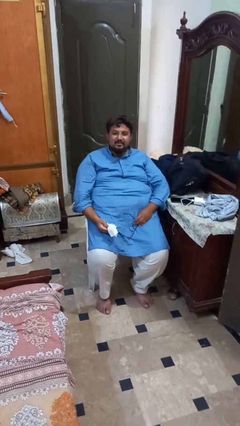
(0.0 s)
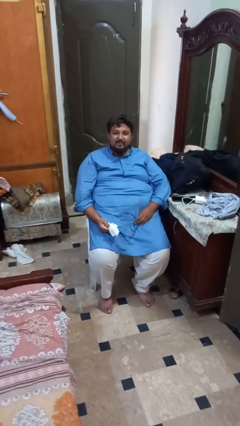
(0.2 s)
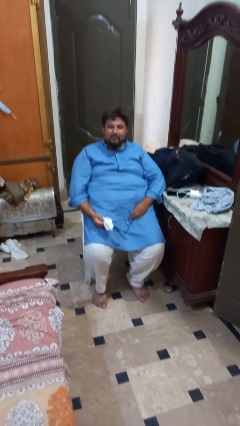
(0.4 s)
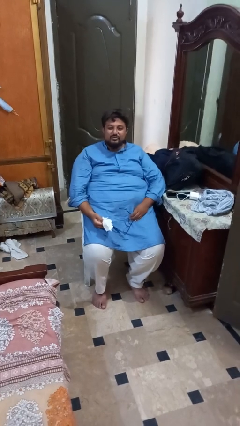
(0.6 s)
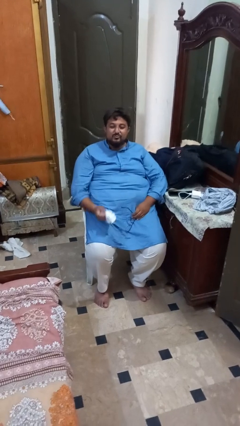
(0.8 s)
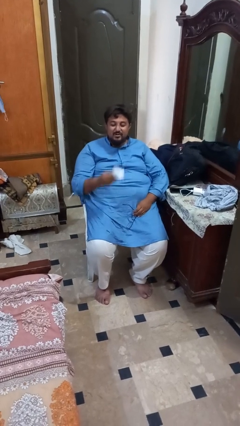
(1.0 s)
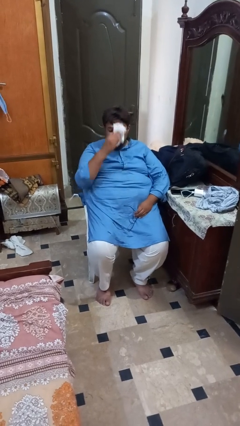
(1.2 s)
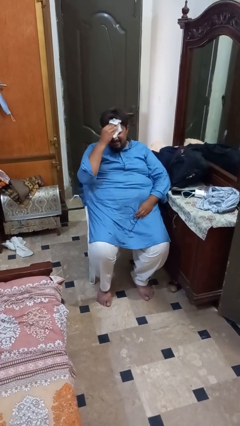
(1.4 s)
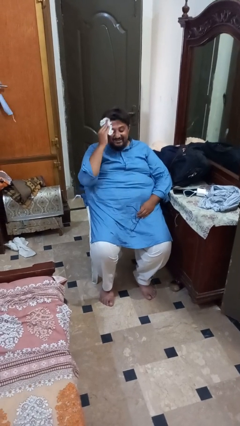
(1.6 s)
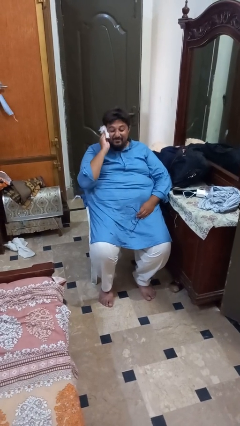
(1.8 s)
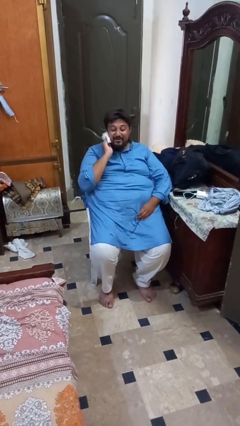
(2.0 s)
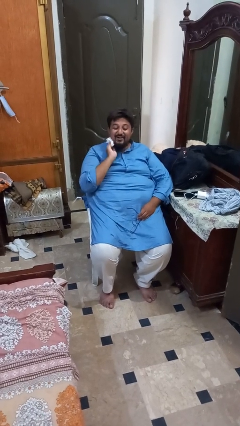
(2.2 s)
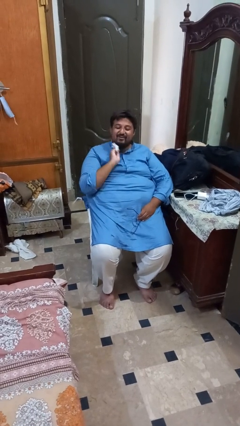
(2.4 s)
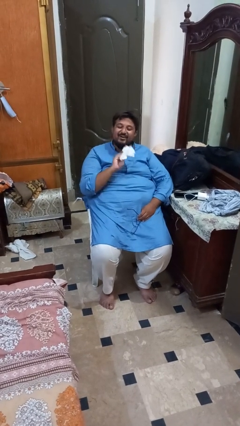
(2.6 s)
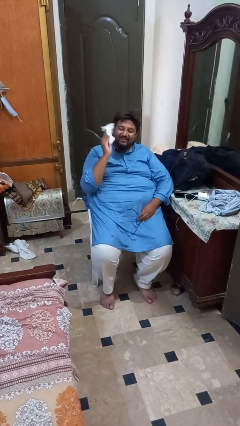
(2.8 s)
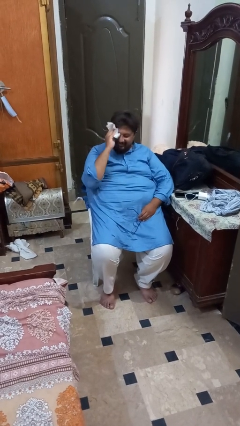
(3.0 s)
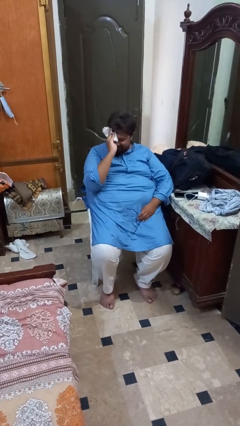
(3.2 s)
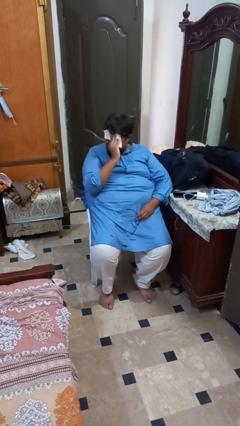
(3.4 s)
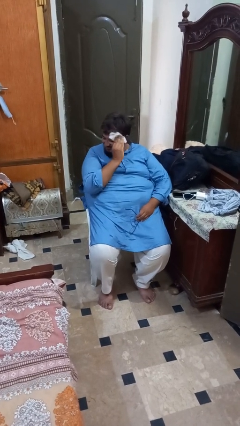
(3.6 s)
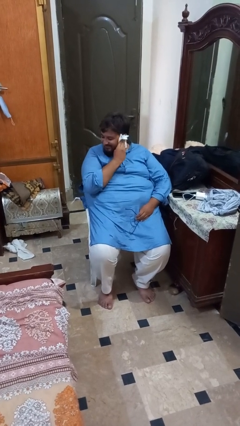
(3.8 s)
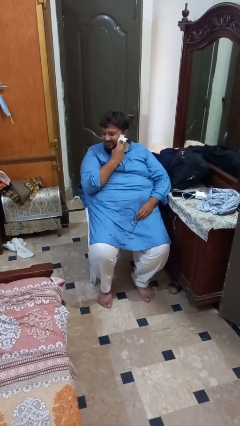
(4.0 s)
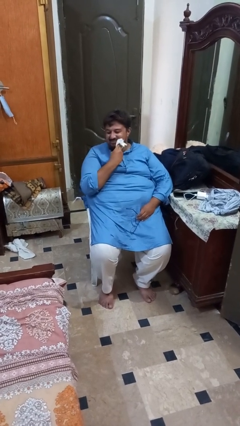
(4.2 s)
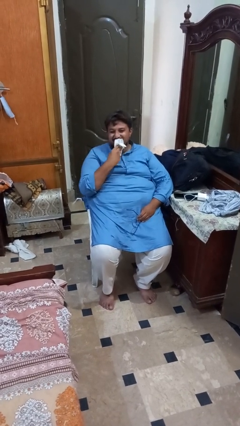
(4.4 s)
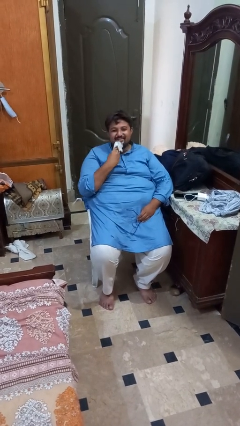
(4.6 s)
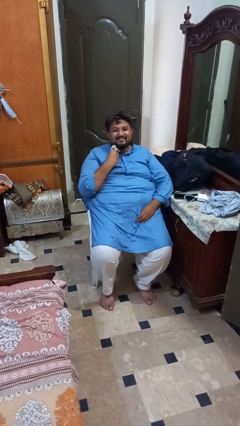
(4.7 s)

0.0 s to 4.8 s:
person wipes mouth with napkin

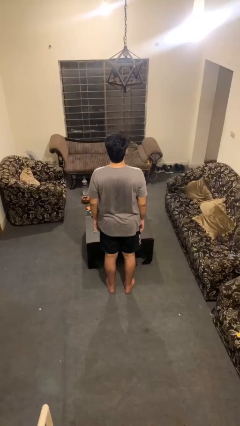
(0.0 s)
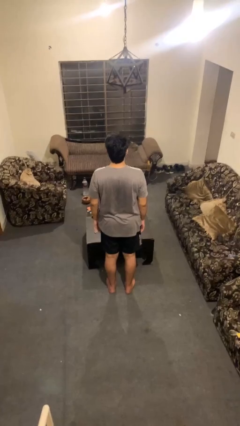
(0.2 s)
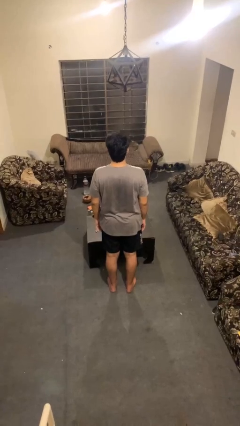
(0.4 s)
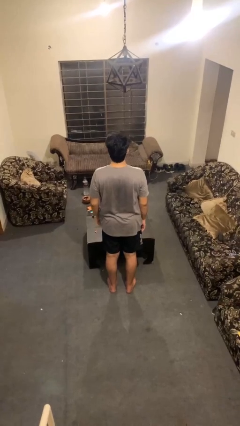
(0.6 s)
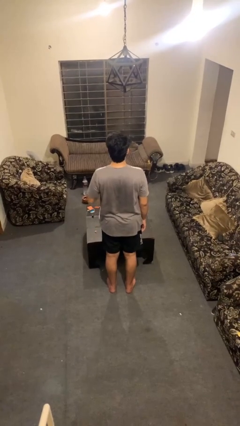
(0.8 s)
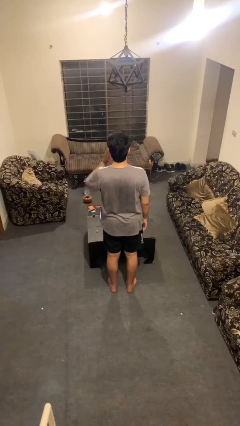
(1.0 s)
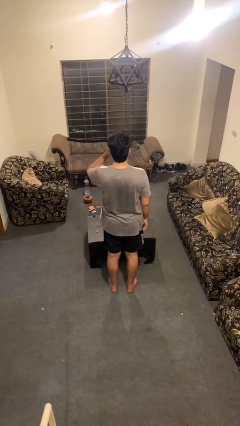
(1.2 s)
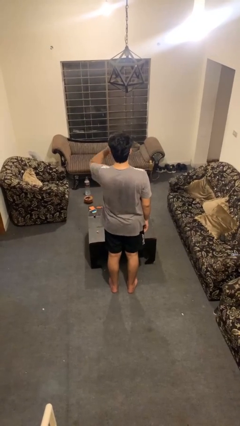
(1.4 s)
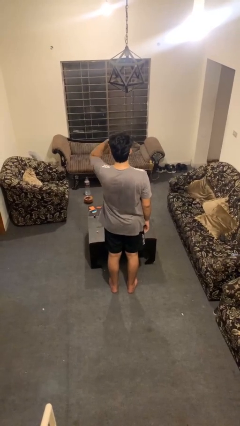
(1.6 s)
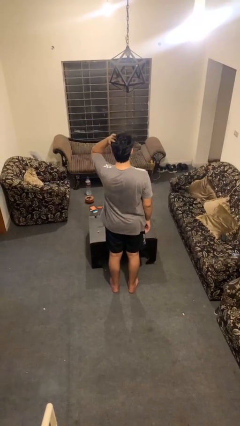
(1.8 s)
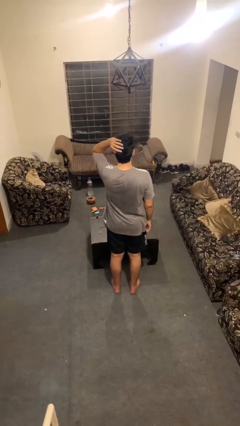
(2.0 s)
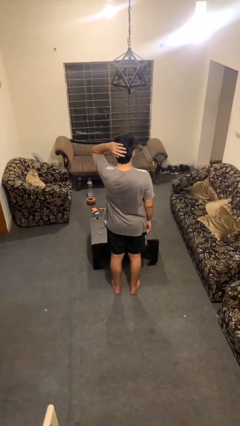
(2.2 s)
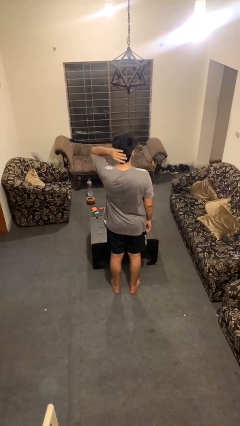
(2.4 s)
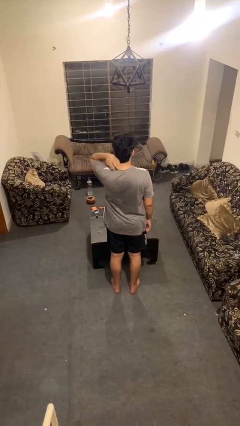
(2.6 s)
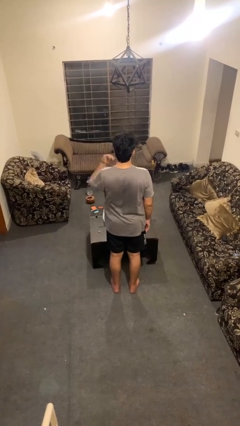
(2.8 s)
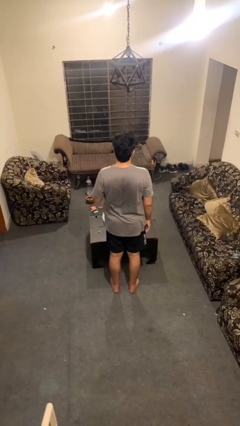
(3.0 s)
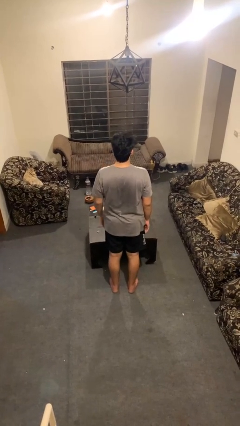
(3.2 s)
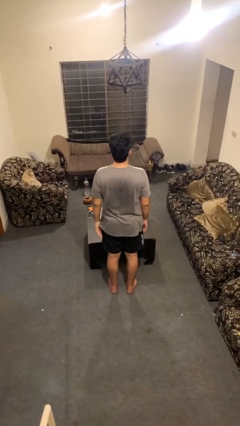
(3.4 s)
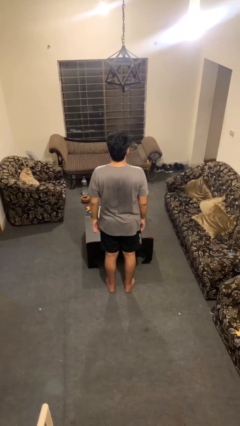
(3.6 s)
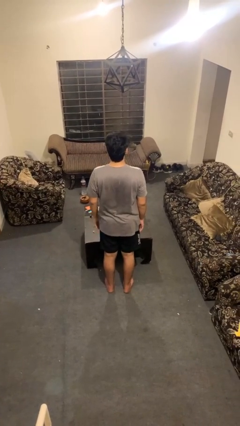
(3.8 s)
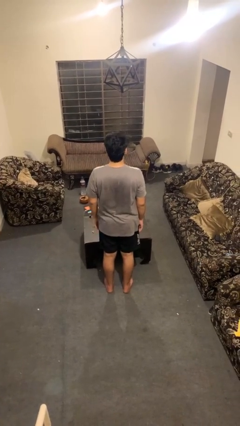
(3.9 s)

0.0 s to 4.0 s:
person strokes hair

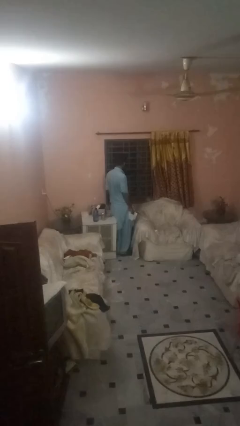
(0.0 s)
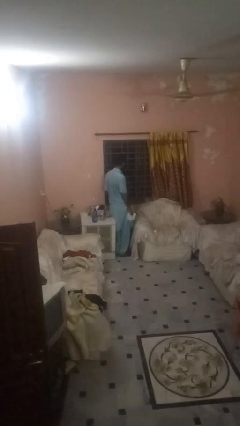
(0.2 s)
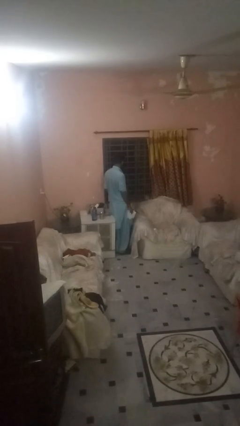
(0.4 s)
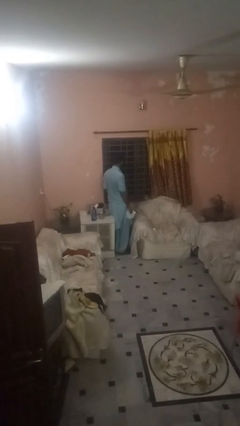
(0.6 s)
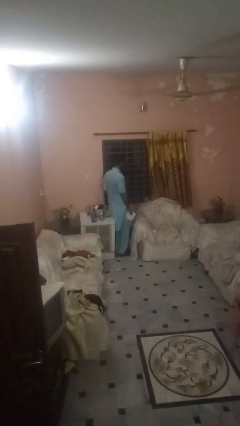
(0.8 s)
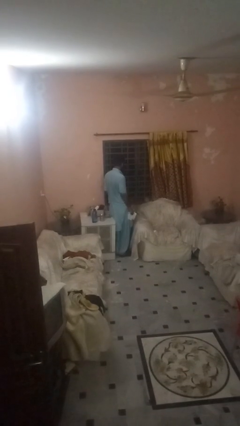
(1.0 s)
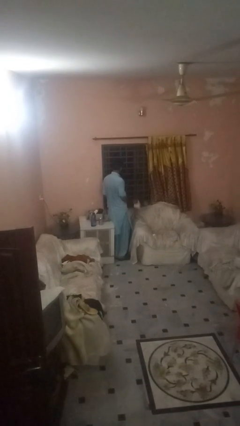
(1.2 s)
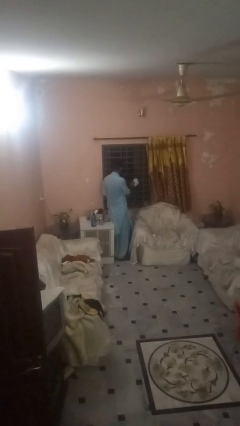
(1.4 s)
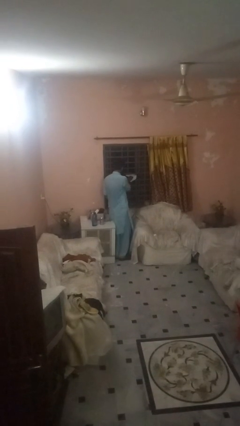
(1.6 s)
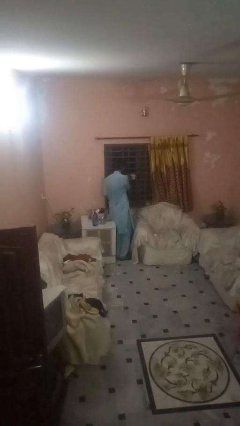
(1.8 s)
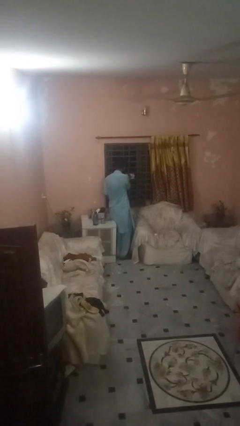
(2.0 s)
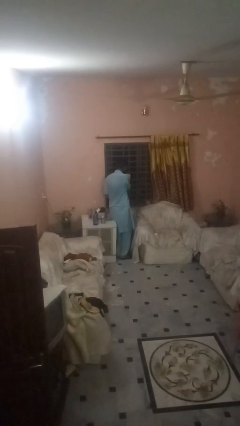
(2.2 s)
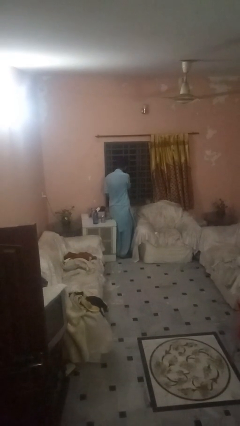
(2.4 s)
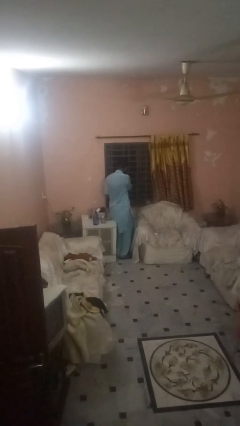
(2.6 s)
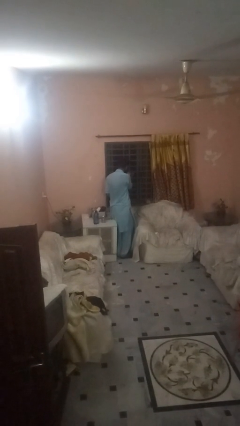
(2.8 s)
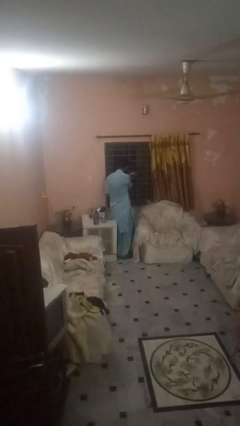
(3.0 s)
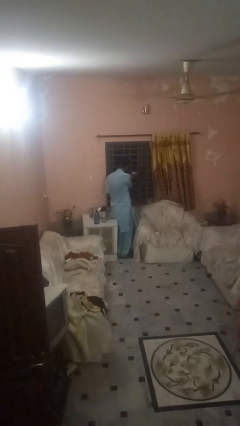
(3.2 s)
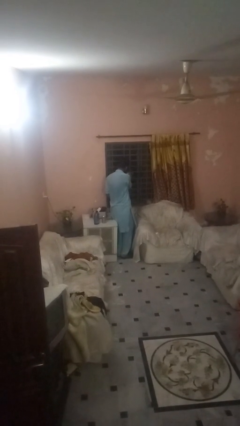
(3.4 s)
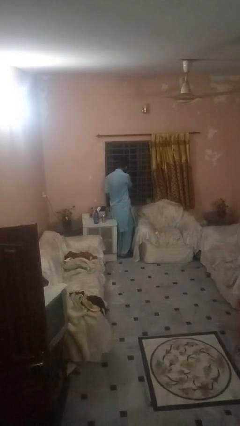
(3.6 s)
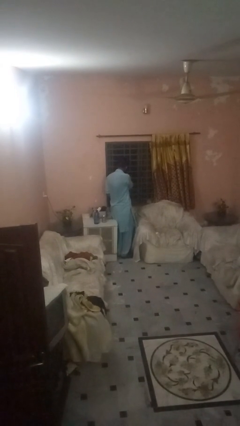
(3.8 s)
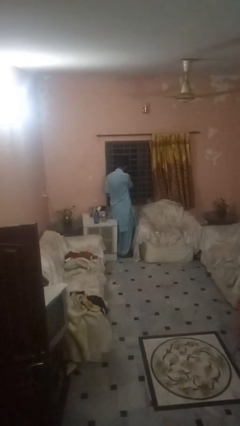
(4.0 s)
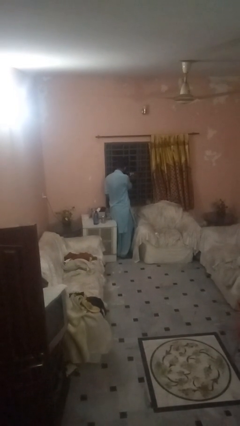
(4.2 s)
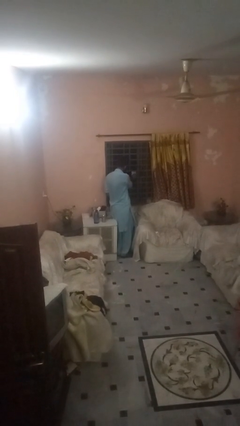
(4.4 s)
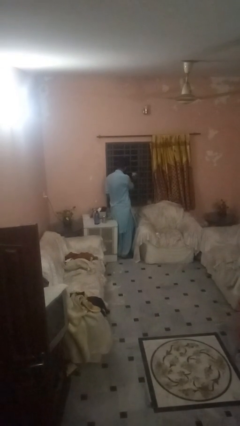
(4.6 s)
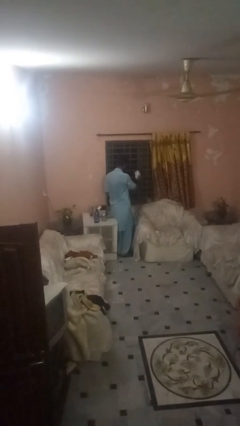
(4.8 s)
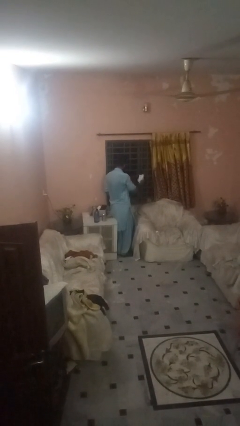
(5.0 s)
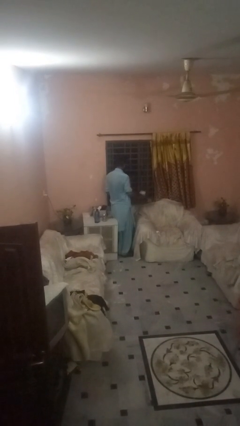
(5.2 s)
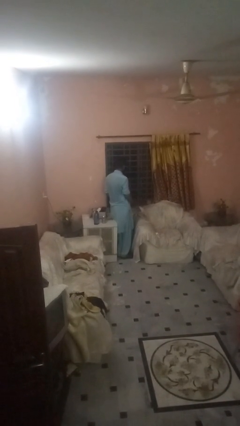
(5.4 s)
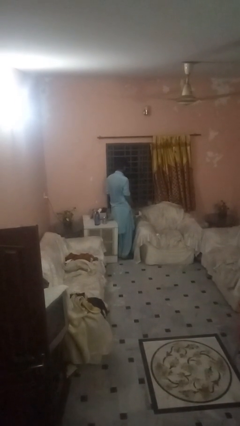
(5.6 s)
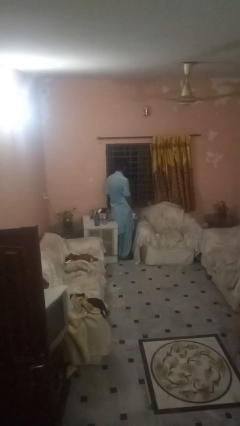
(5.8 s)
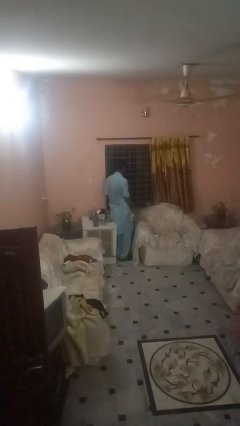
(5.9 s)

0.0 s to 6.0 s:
person washes window

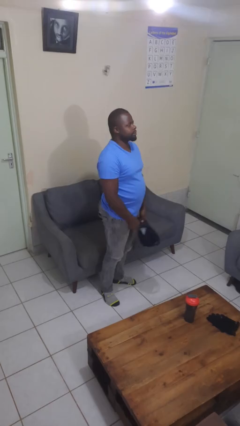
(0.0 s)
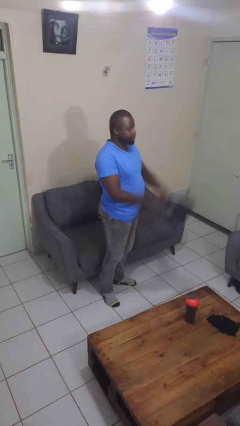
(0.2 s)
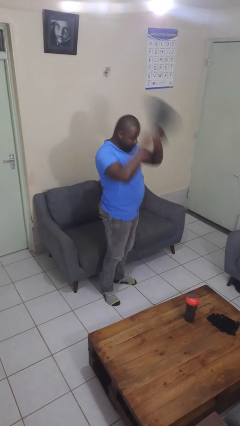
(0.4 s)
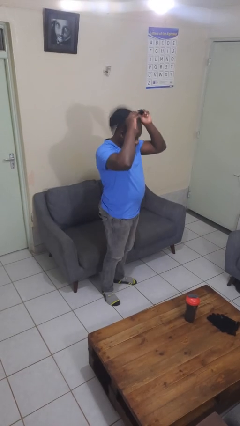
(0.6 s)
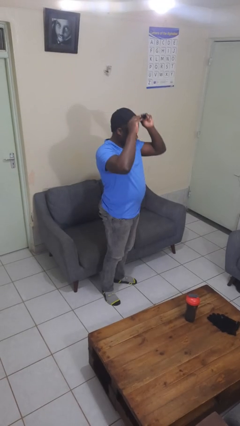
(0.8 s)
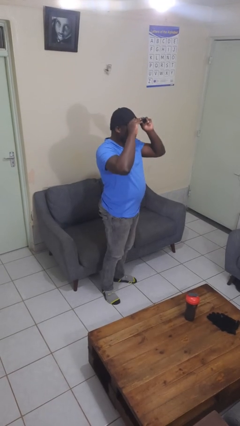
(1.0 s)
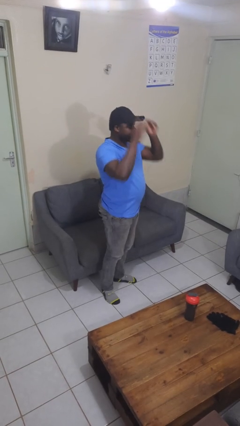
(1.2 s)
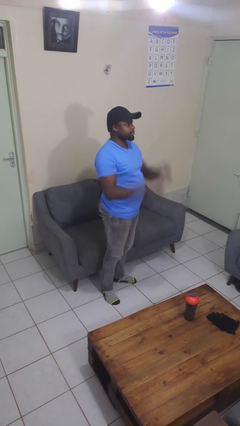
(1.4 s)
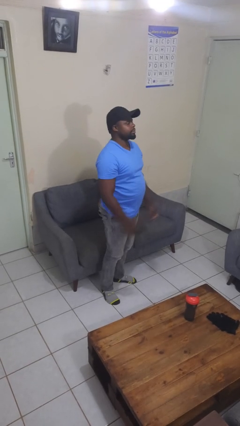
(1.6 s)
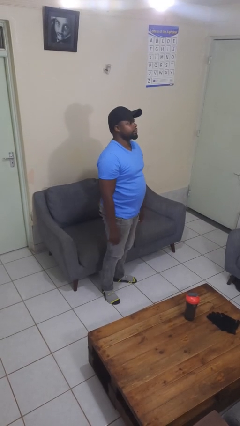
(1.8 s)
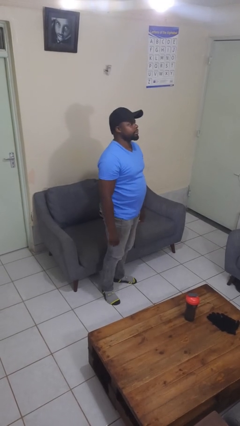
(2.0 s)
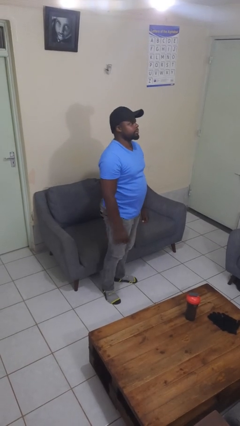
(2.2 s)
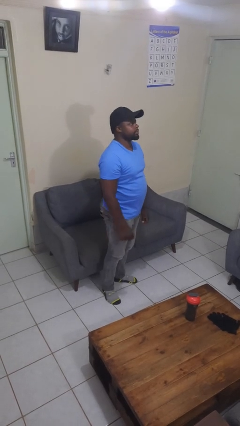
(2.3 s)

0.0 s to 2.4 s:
person puts on hat

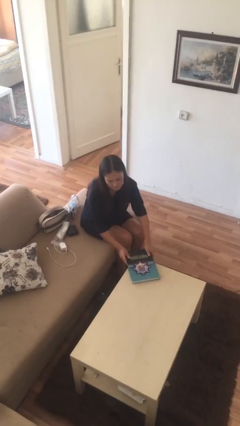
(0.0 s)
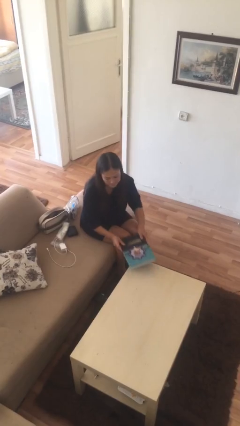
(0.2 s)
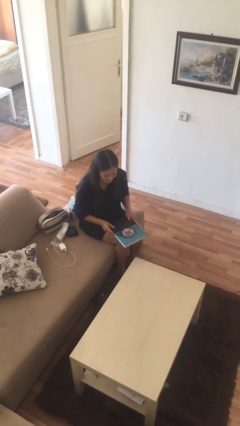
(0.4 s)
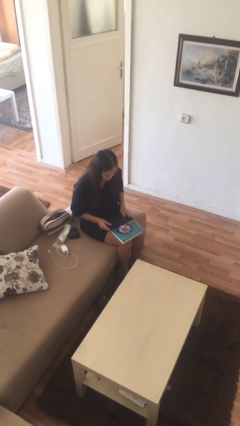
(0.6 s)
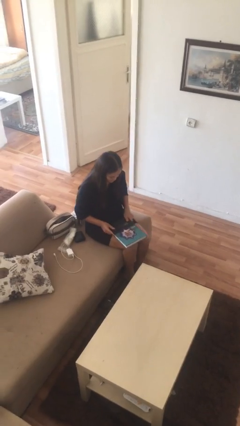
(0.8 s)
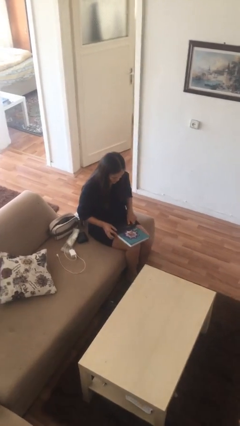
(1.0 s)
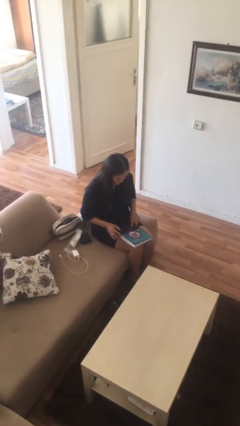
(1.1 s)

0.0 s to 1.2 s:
person picks up object from table
